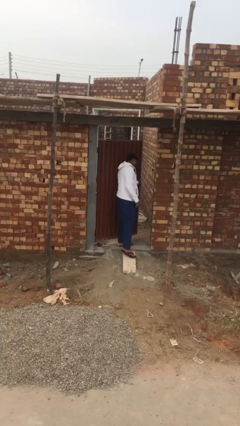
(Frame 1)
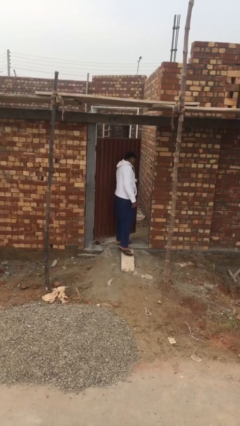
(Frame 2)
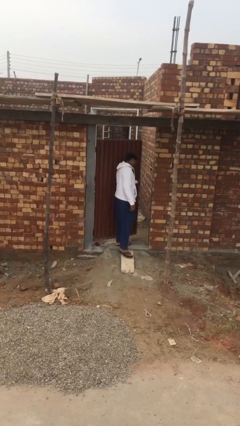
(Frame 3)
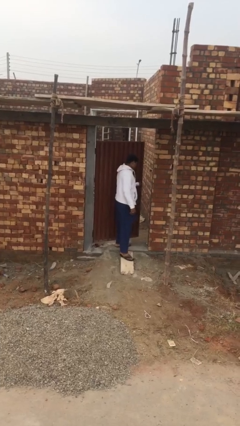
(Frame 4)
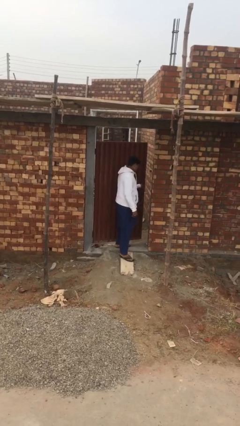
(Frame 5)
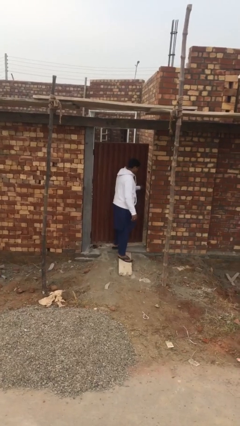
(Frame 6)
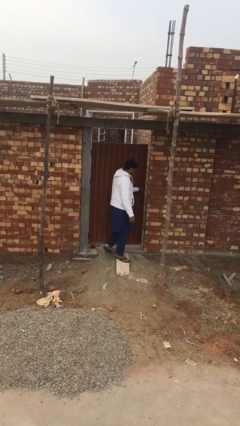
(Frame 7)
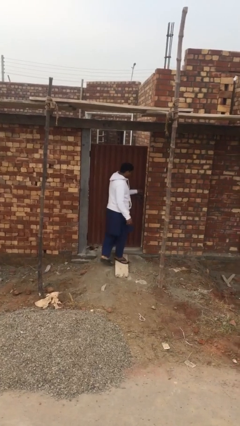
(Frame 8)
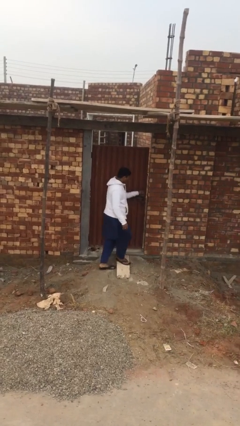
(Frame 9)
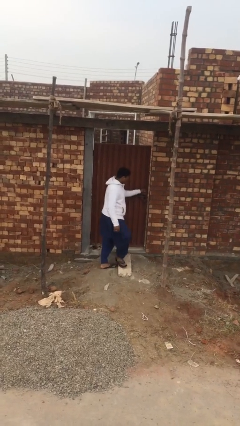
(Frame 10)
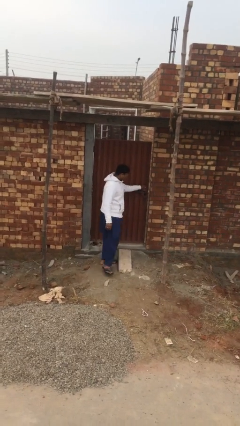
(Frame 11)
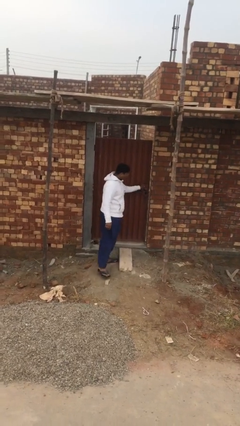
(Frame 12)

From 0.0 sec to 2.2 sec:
person closes facility door

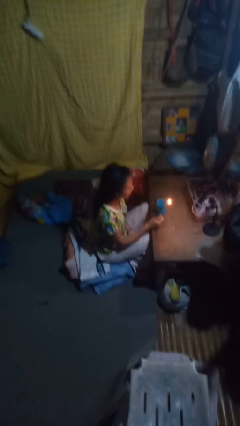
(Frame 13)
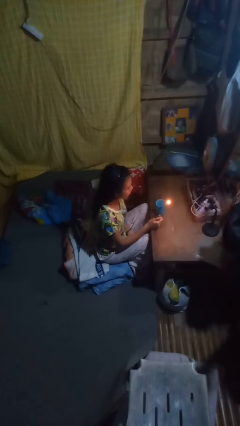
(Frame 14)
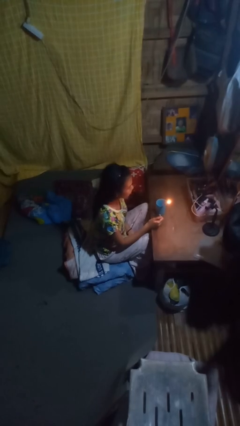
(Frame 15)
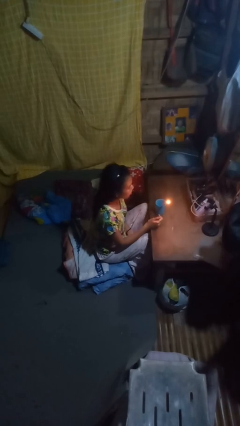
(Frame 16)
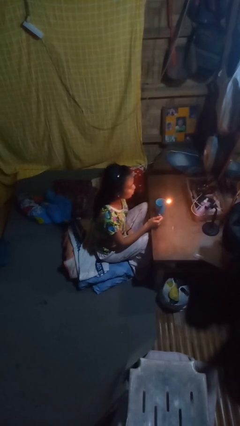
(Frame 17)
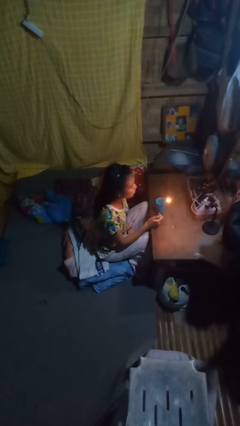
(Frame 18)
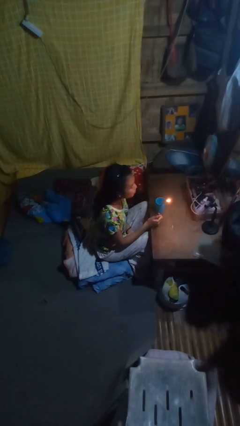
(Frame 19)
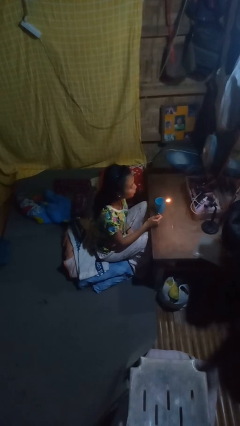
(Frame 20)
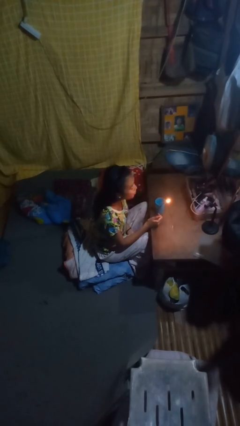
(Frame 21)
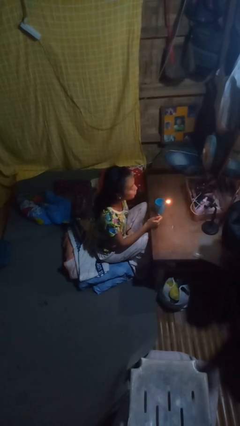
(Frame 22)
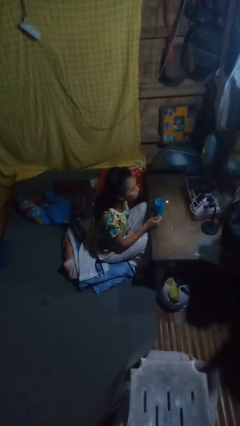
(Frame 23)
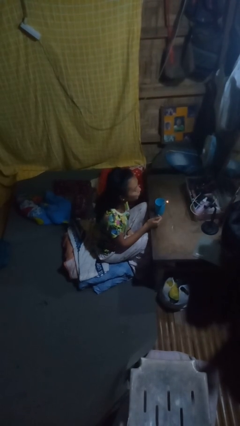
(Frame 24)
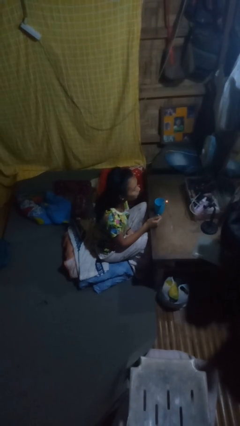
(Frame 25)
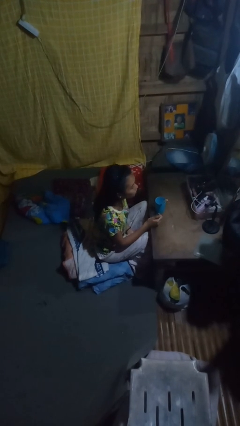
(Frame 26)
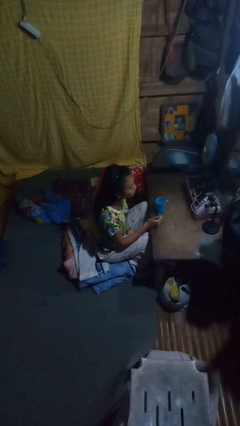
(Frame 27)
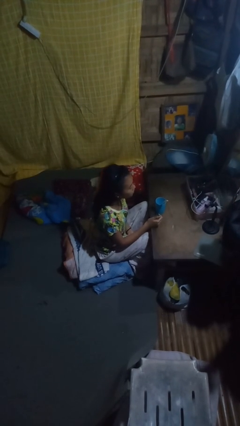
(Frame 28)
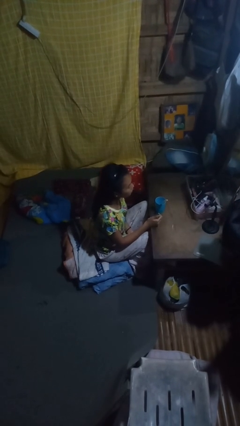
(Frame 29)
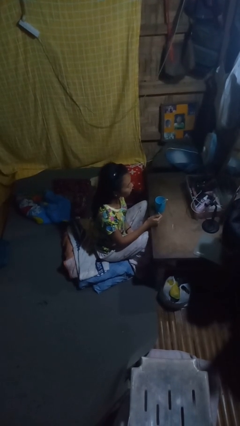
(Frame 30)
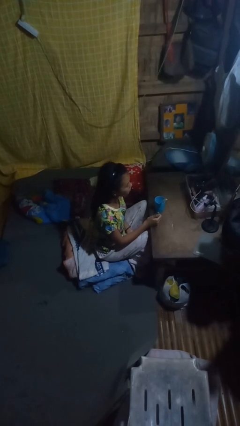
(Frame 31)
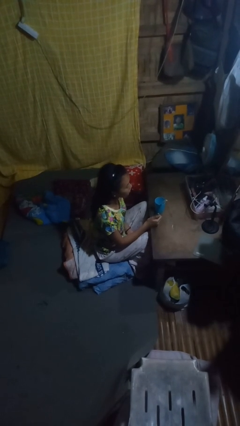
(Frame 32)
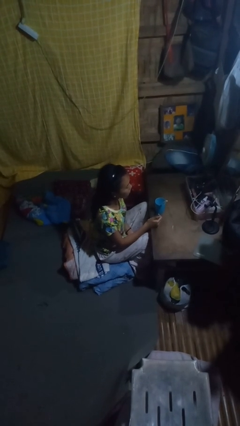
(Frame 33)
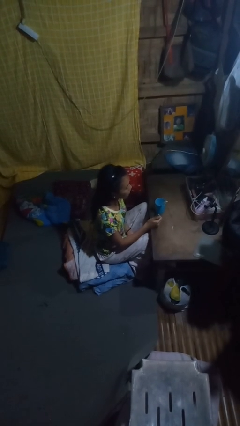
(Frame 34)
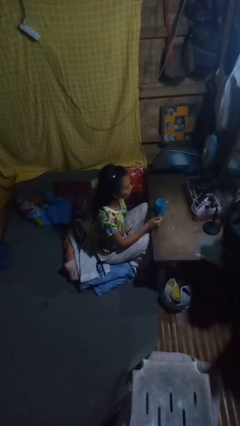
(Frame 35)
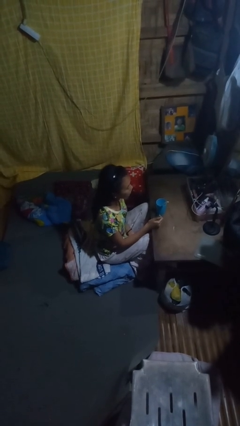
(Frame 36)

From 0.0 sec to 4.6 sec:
person extinguishes candle

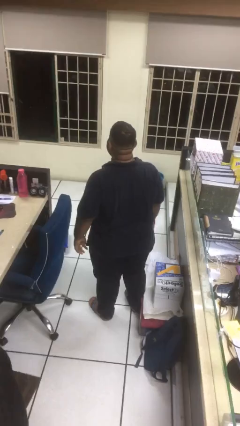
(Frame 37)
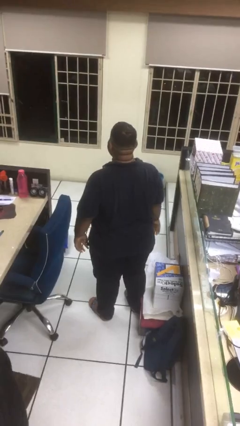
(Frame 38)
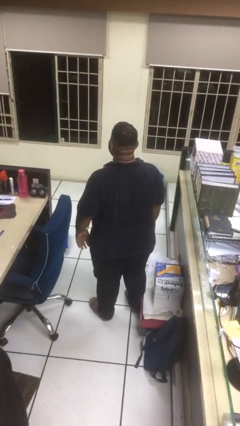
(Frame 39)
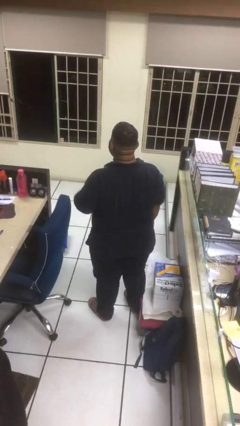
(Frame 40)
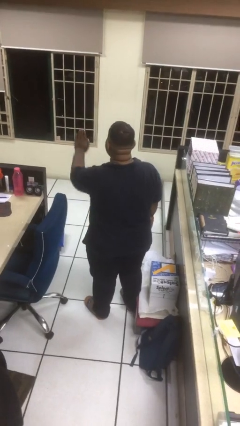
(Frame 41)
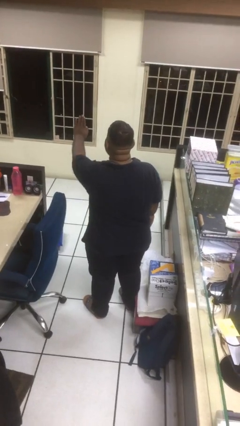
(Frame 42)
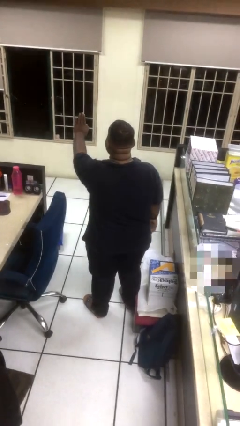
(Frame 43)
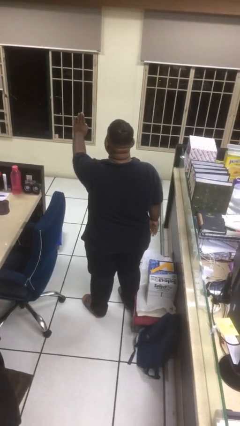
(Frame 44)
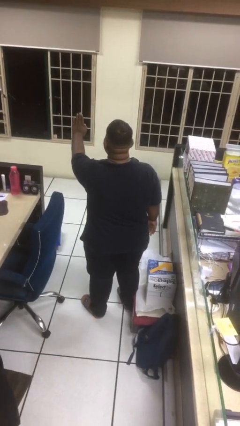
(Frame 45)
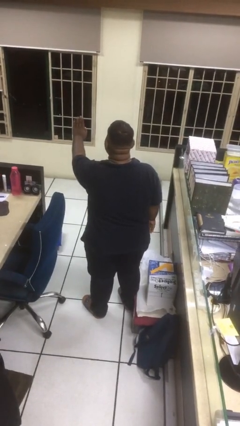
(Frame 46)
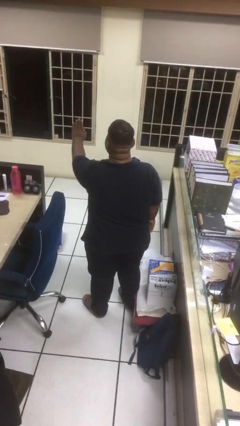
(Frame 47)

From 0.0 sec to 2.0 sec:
person gestures stop

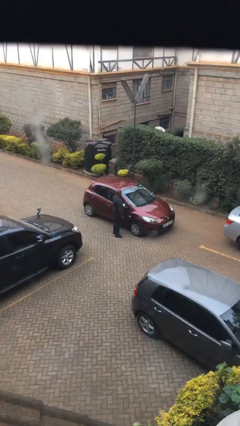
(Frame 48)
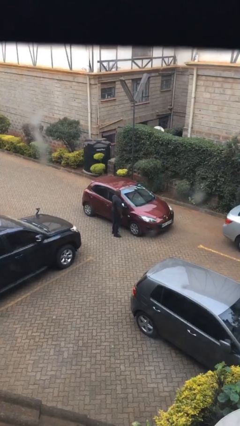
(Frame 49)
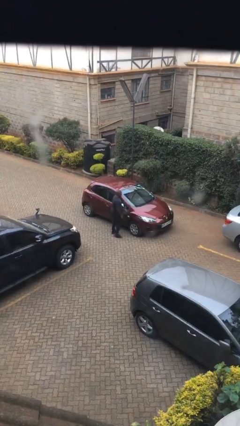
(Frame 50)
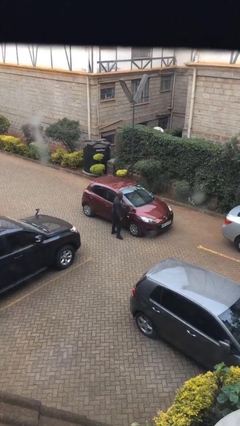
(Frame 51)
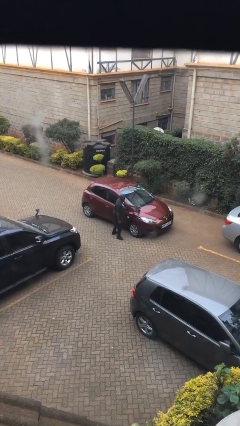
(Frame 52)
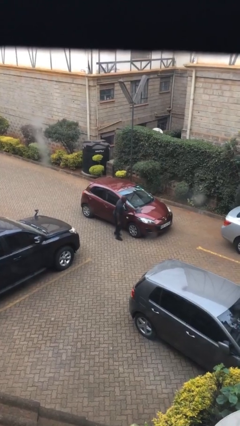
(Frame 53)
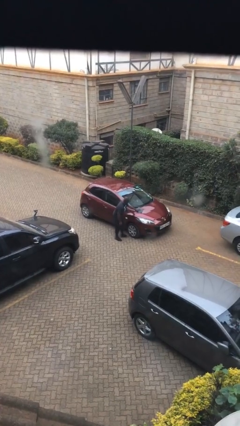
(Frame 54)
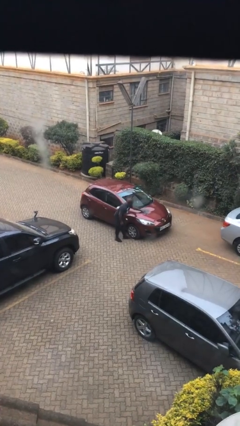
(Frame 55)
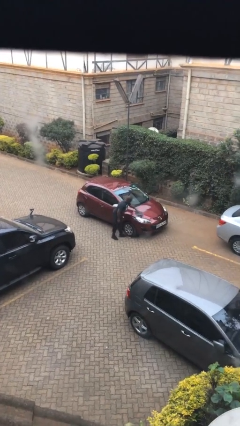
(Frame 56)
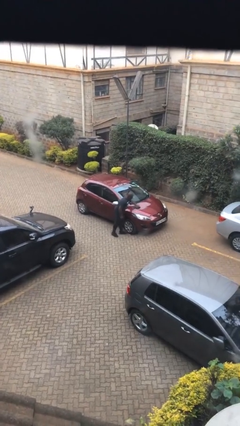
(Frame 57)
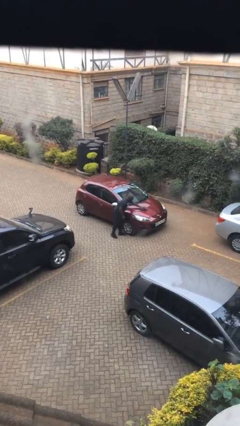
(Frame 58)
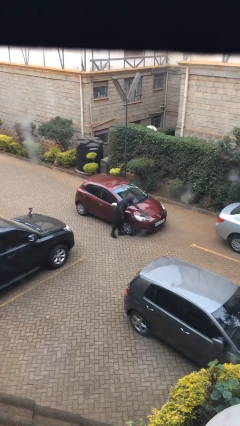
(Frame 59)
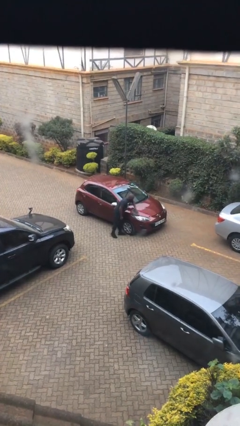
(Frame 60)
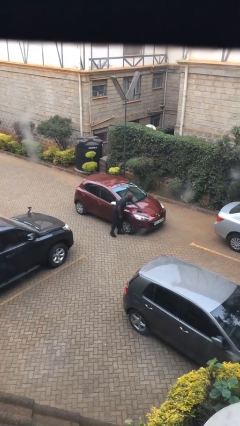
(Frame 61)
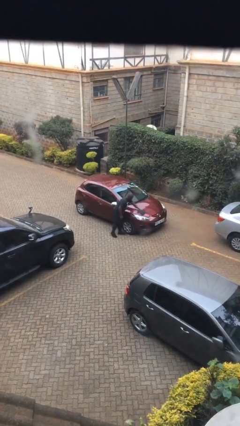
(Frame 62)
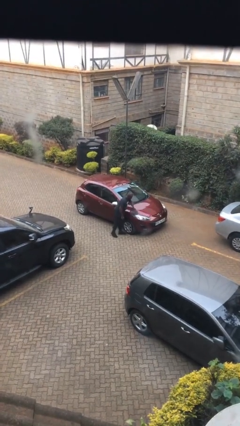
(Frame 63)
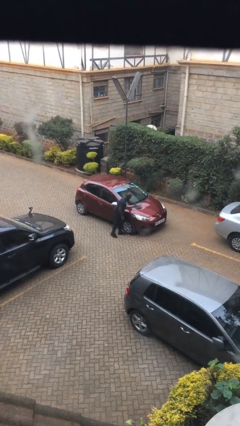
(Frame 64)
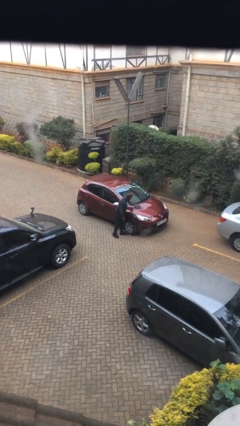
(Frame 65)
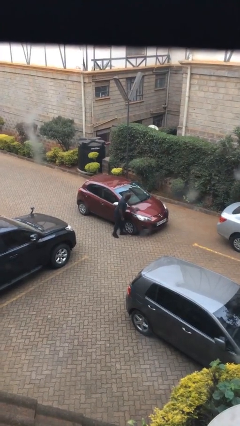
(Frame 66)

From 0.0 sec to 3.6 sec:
person polishes car with rag

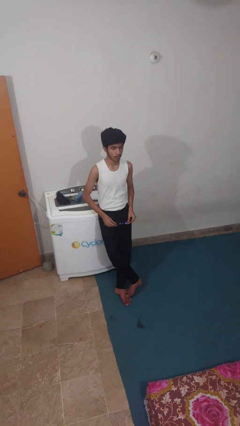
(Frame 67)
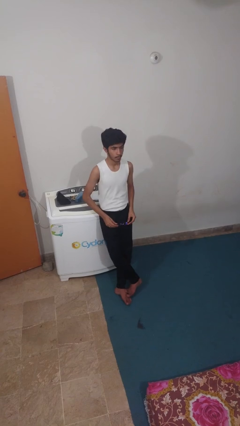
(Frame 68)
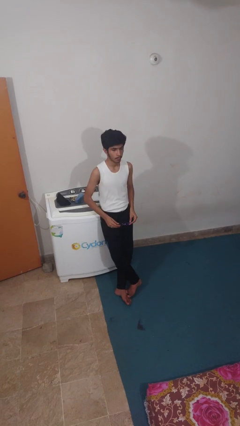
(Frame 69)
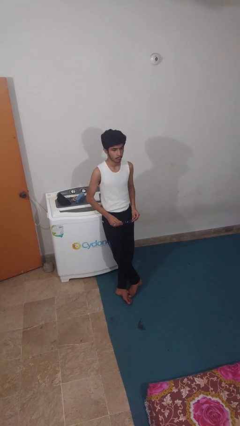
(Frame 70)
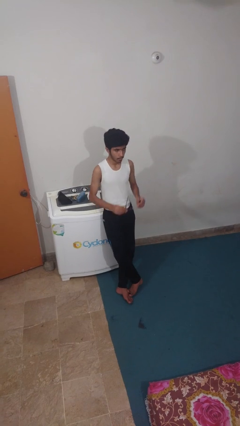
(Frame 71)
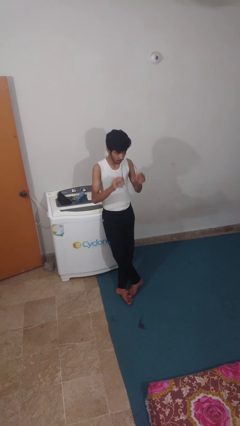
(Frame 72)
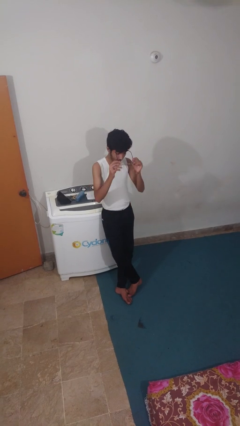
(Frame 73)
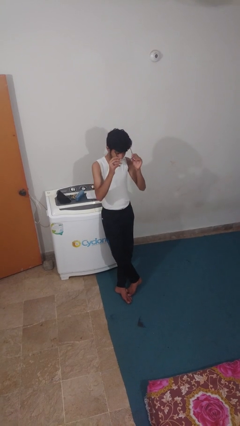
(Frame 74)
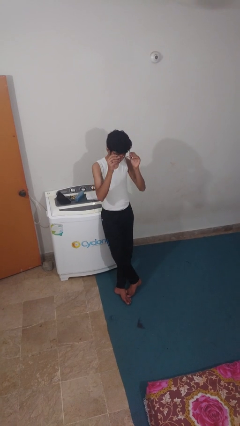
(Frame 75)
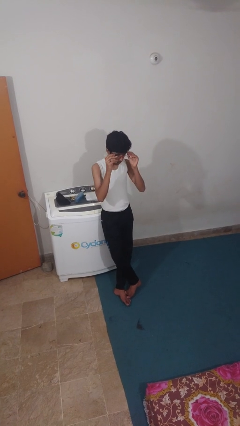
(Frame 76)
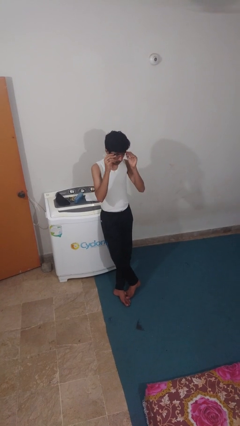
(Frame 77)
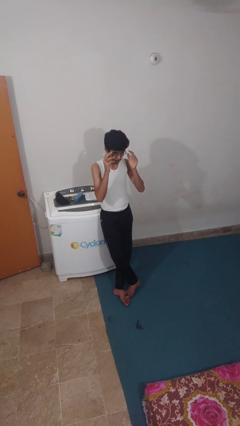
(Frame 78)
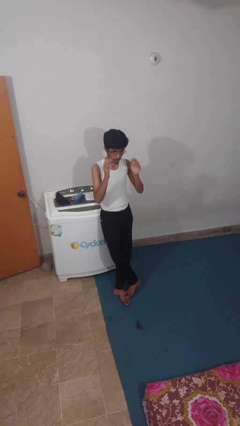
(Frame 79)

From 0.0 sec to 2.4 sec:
person puts on glasses

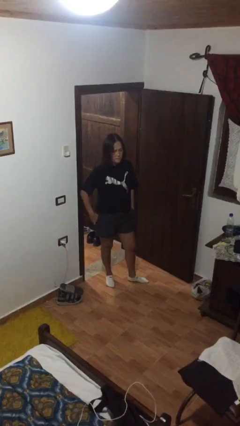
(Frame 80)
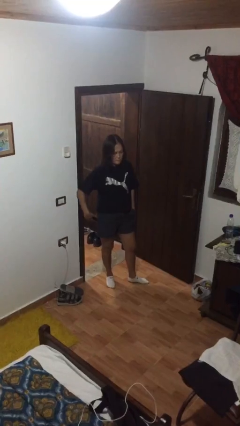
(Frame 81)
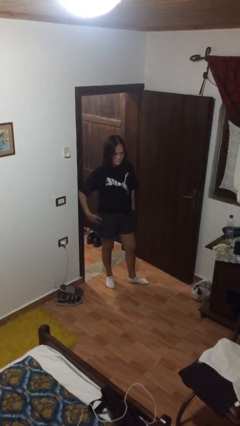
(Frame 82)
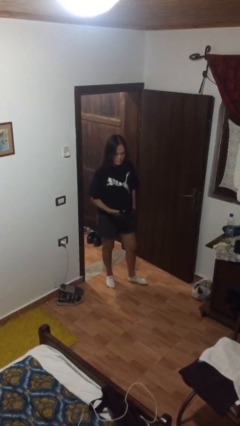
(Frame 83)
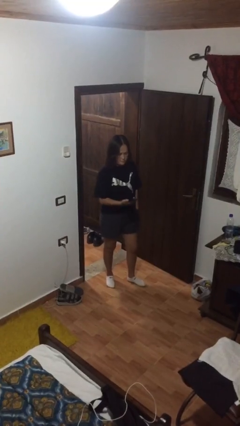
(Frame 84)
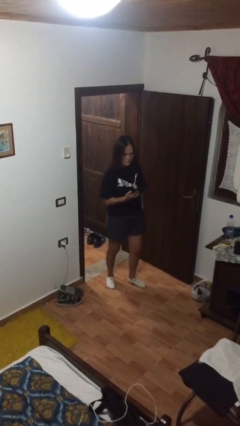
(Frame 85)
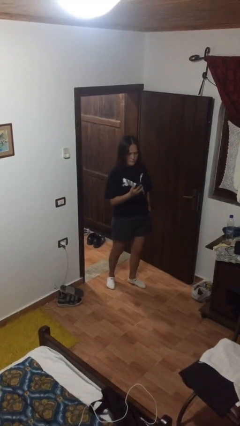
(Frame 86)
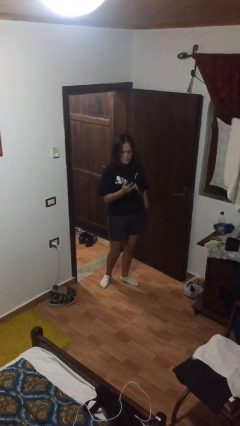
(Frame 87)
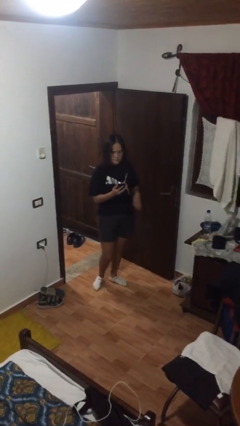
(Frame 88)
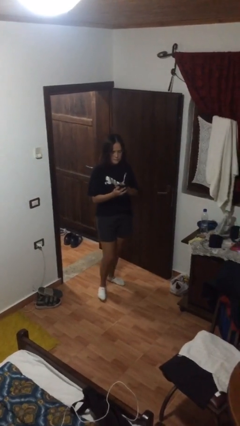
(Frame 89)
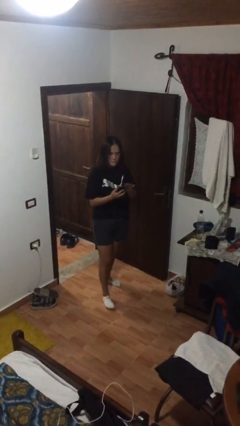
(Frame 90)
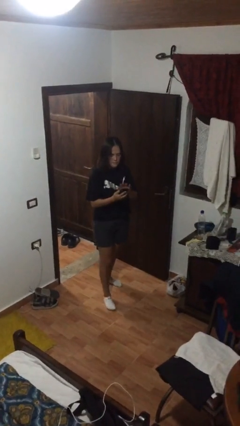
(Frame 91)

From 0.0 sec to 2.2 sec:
person takes phone from pocket

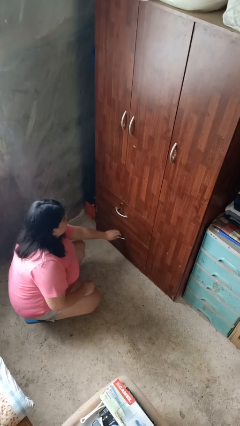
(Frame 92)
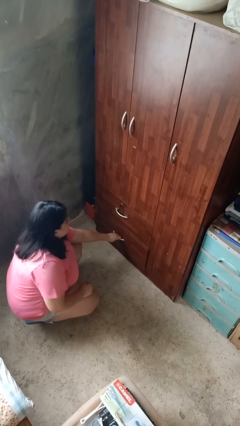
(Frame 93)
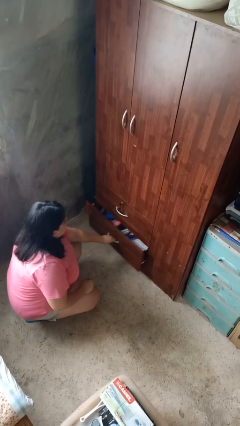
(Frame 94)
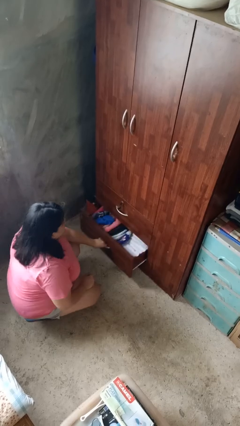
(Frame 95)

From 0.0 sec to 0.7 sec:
person opens dresser drawer
